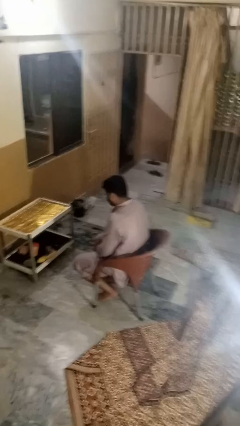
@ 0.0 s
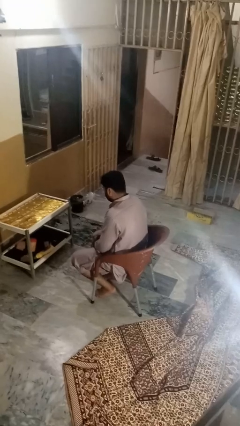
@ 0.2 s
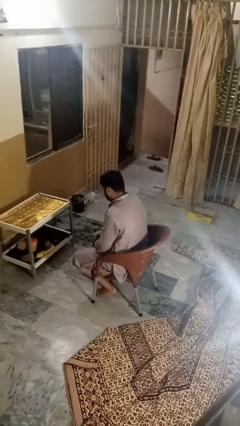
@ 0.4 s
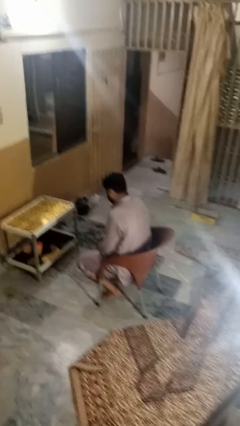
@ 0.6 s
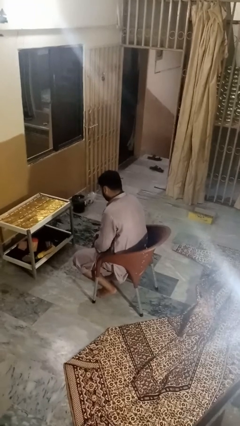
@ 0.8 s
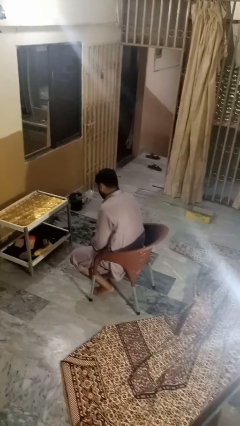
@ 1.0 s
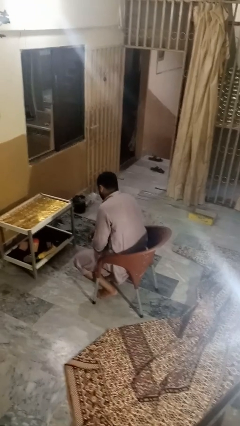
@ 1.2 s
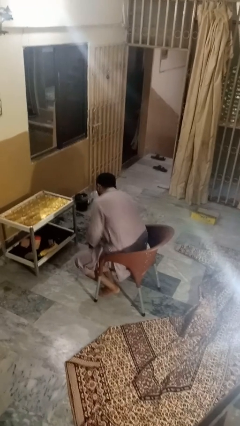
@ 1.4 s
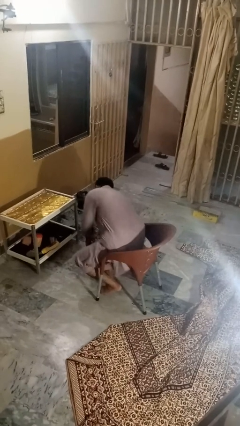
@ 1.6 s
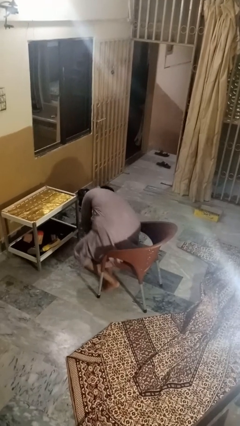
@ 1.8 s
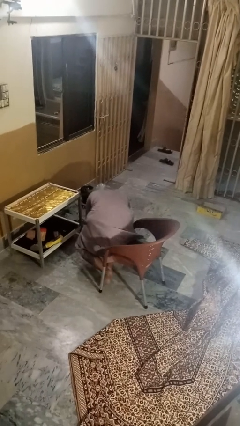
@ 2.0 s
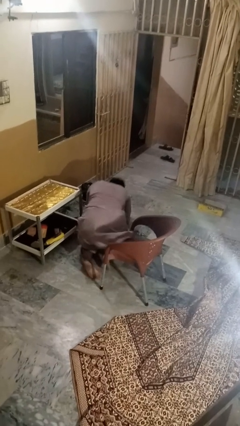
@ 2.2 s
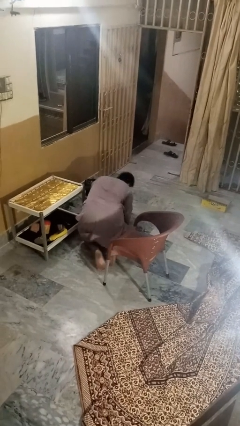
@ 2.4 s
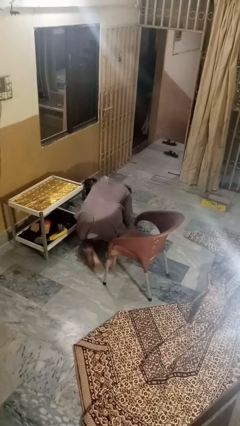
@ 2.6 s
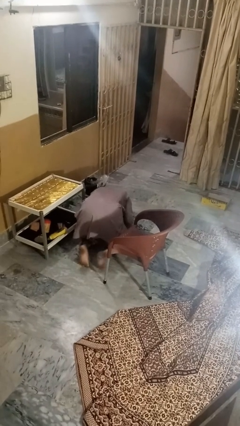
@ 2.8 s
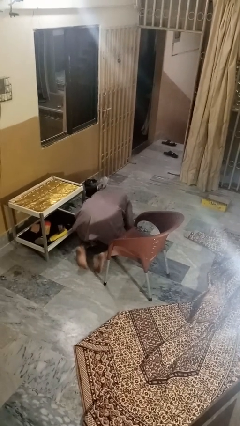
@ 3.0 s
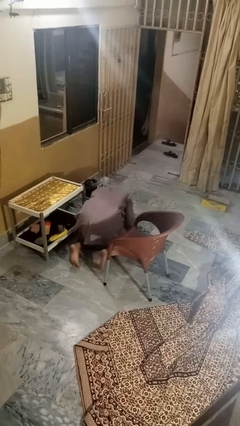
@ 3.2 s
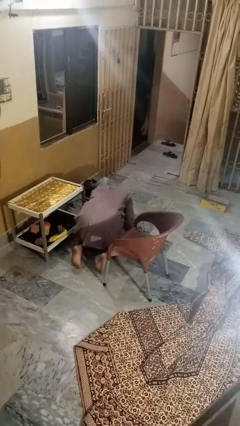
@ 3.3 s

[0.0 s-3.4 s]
person falls from chair

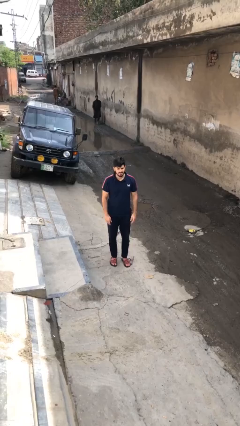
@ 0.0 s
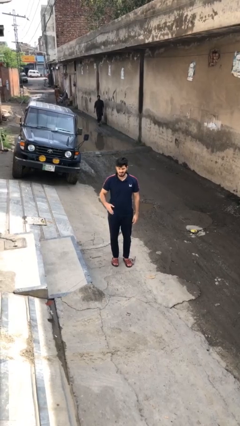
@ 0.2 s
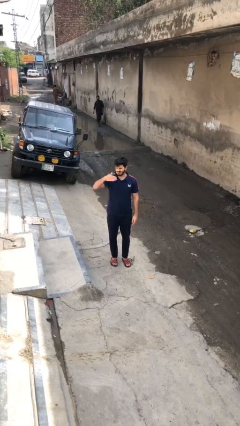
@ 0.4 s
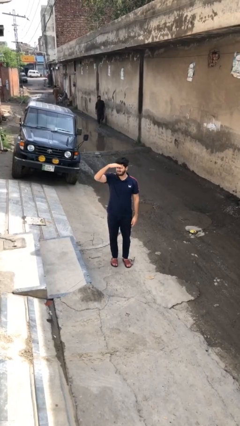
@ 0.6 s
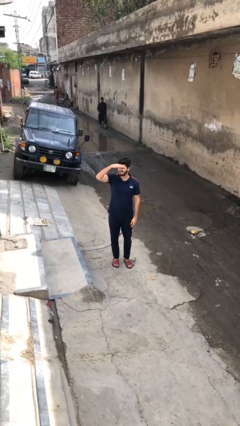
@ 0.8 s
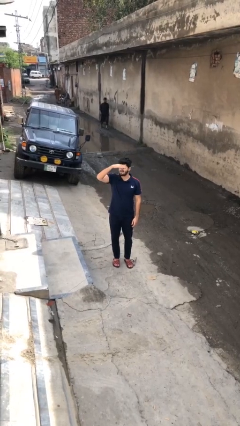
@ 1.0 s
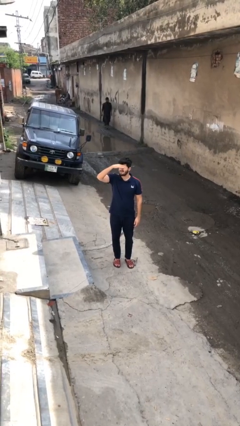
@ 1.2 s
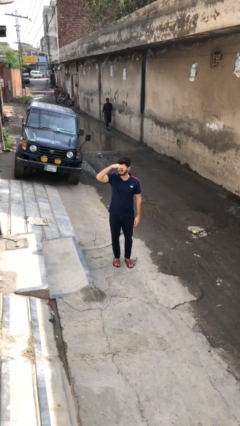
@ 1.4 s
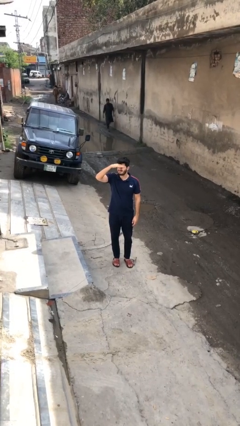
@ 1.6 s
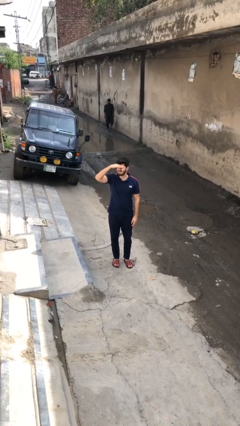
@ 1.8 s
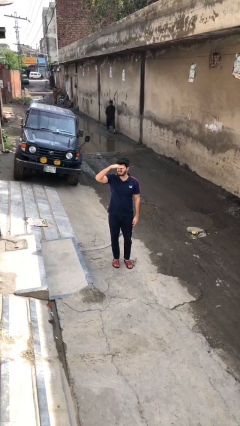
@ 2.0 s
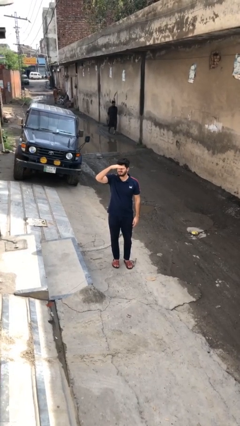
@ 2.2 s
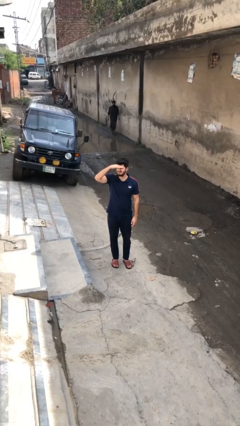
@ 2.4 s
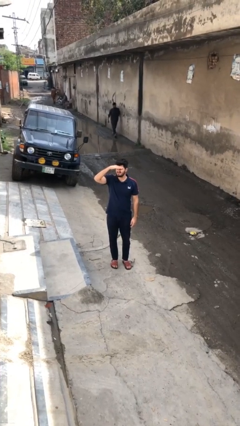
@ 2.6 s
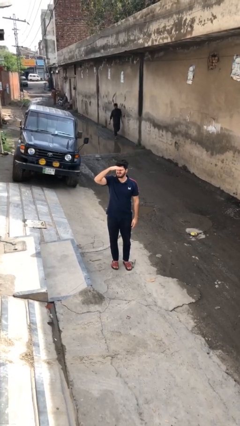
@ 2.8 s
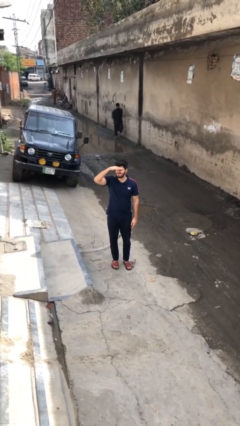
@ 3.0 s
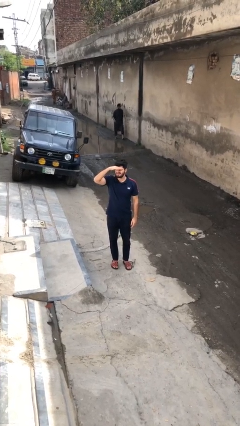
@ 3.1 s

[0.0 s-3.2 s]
person shades eyes

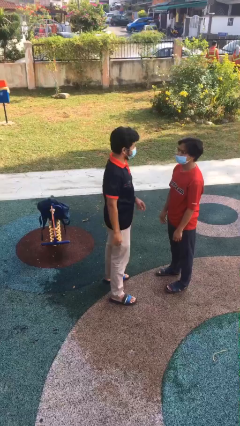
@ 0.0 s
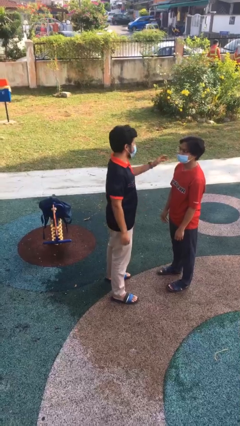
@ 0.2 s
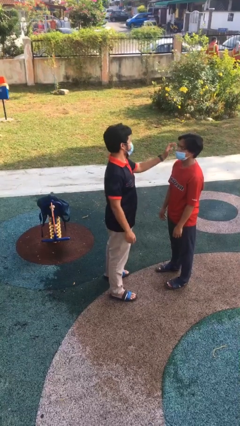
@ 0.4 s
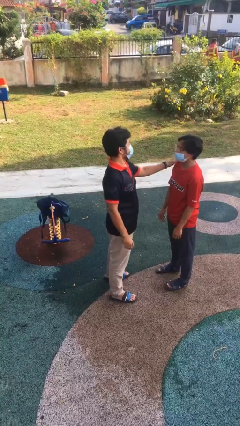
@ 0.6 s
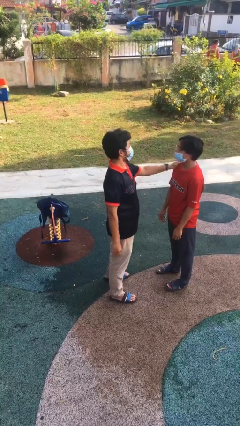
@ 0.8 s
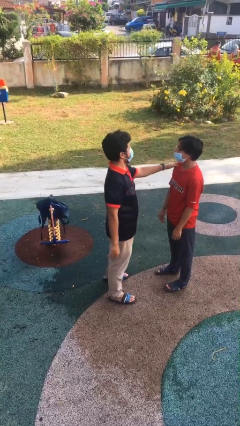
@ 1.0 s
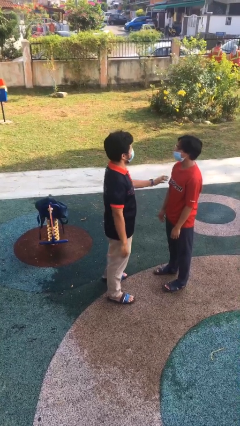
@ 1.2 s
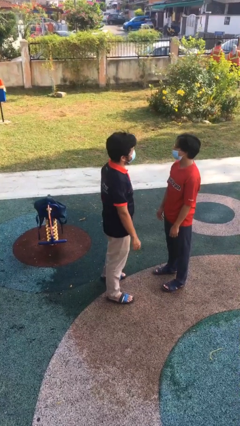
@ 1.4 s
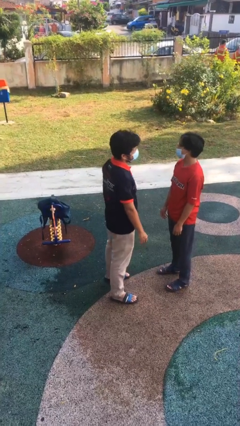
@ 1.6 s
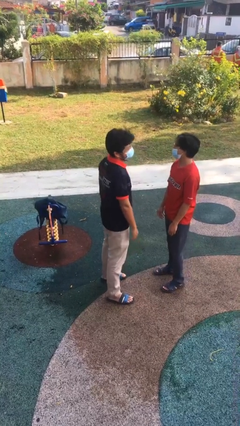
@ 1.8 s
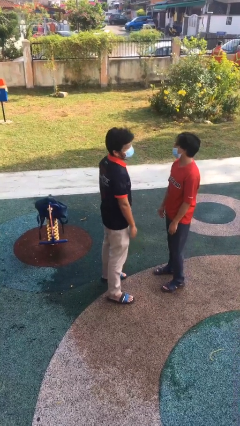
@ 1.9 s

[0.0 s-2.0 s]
person pounds shoulders of person

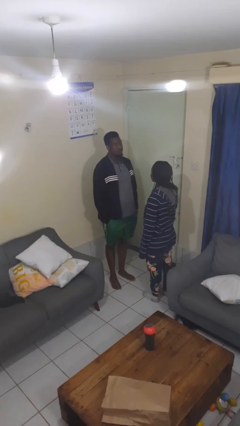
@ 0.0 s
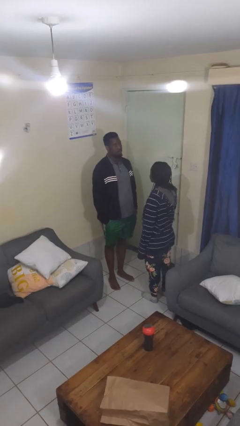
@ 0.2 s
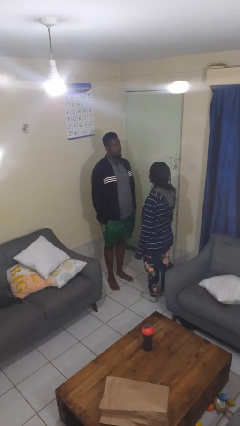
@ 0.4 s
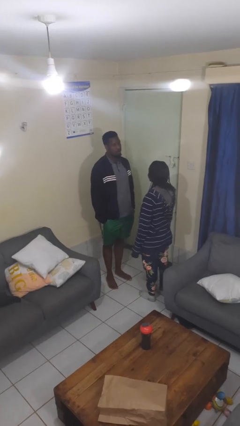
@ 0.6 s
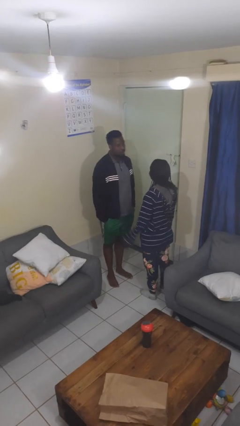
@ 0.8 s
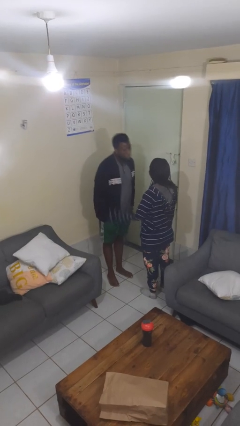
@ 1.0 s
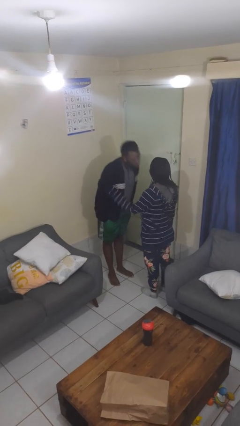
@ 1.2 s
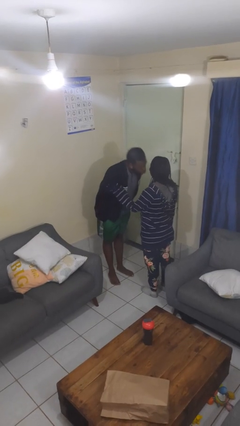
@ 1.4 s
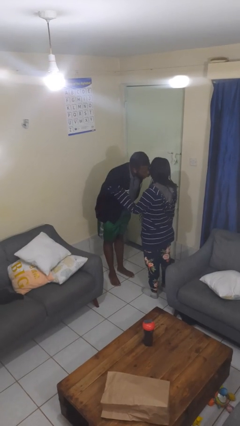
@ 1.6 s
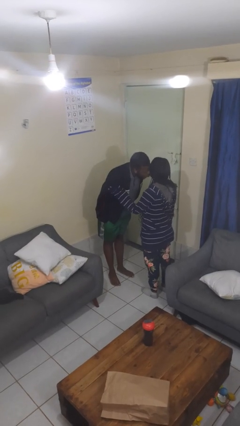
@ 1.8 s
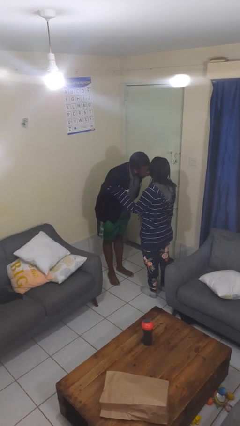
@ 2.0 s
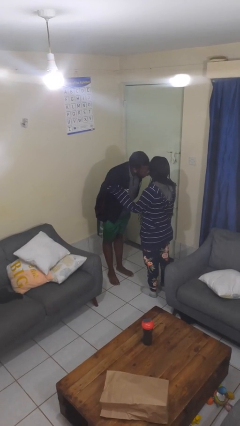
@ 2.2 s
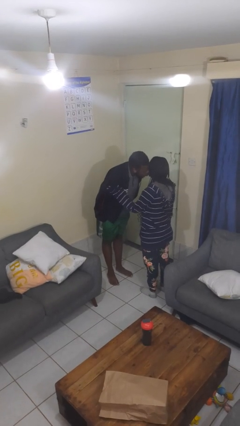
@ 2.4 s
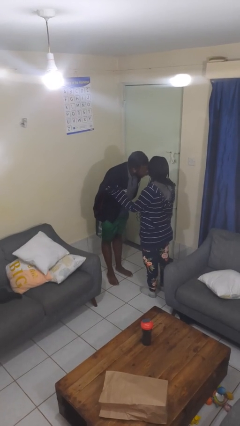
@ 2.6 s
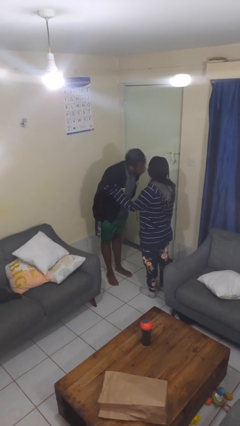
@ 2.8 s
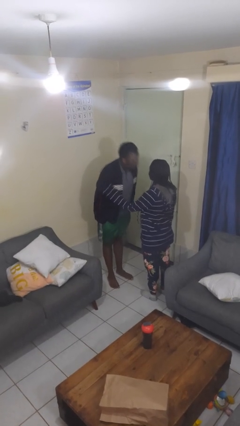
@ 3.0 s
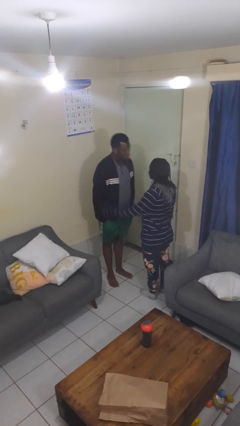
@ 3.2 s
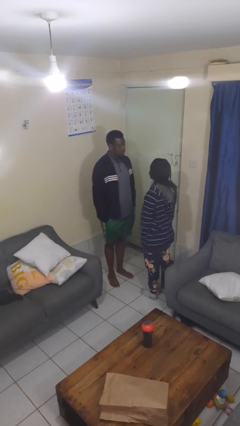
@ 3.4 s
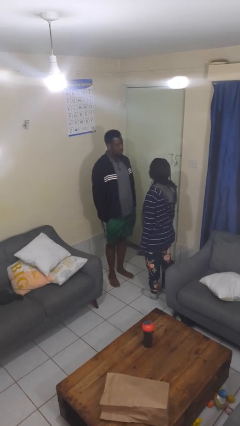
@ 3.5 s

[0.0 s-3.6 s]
person kisses cheek of person

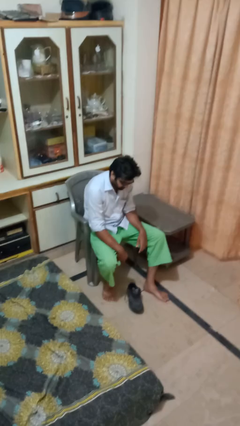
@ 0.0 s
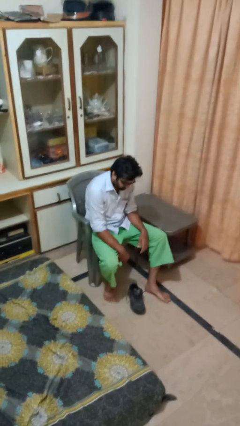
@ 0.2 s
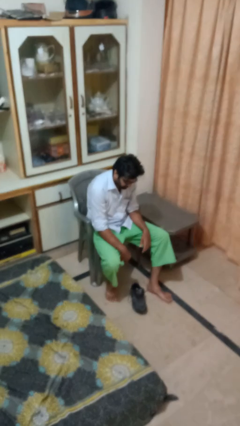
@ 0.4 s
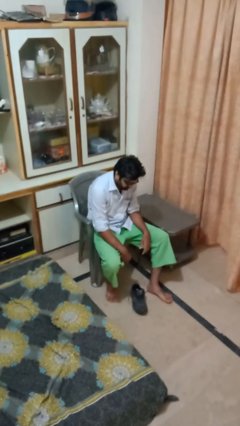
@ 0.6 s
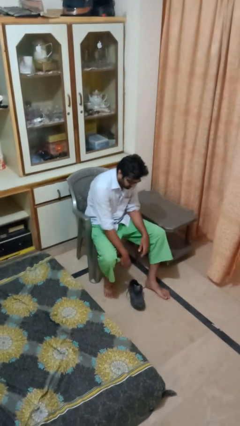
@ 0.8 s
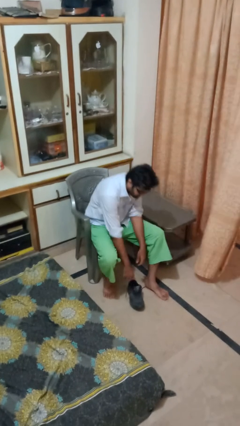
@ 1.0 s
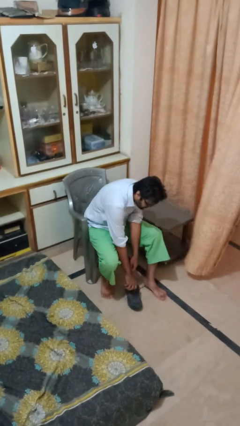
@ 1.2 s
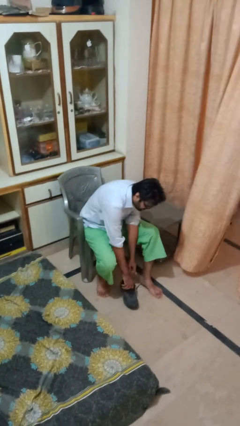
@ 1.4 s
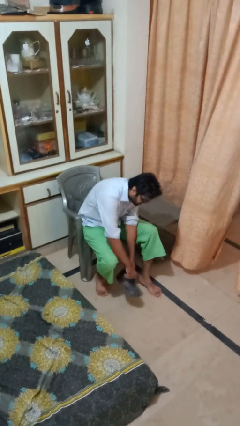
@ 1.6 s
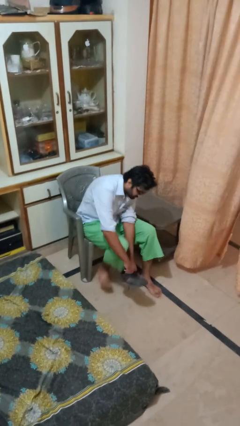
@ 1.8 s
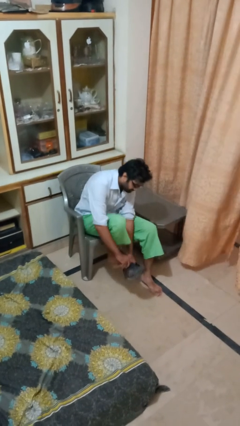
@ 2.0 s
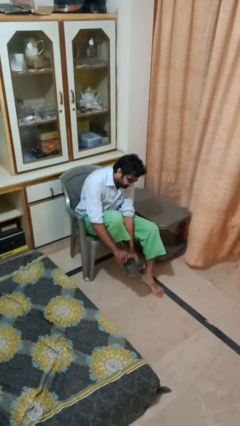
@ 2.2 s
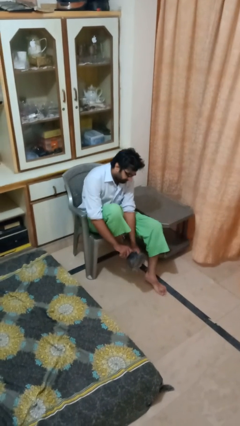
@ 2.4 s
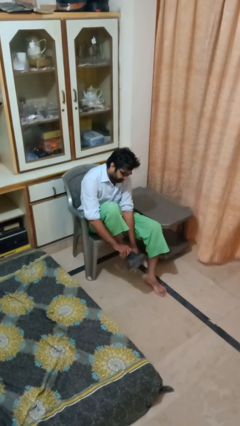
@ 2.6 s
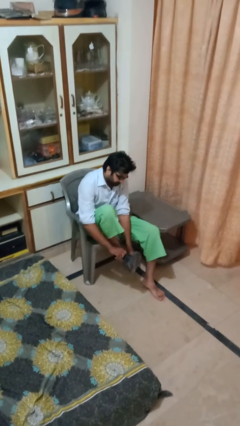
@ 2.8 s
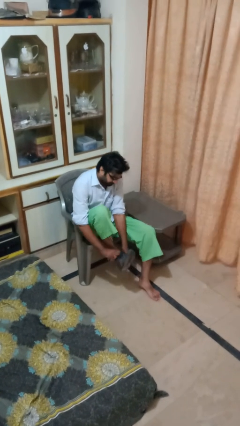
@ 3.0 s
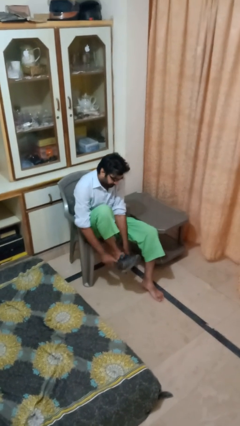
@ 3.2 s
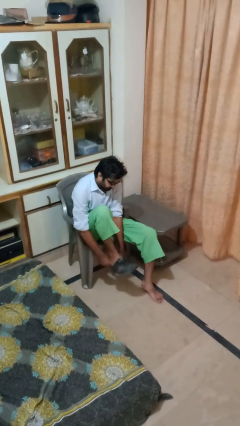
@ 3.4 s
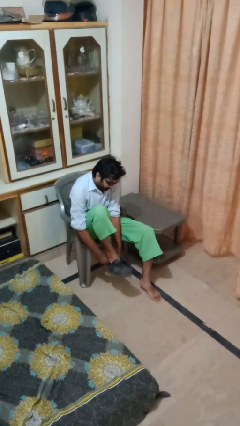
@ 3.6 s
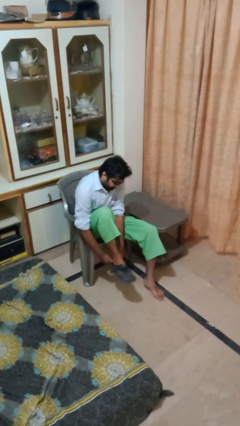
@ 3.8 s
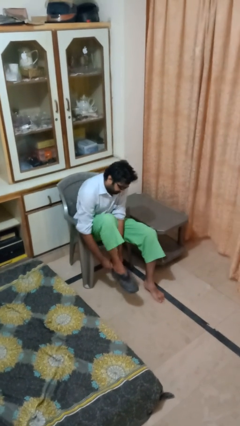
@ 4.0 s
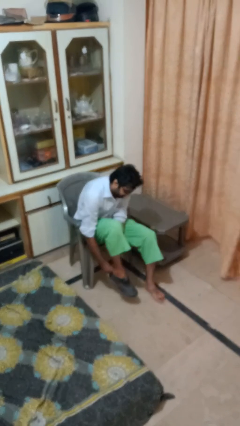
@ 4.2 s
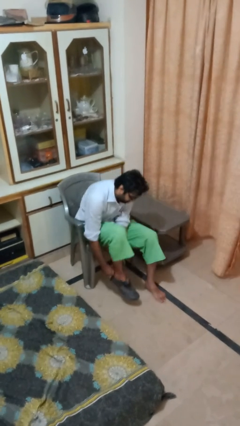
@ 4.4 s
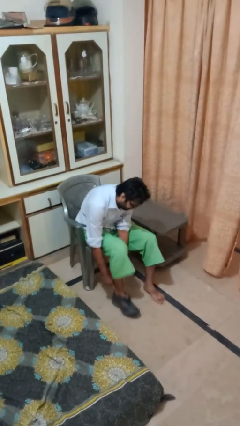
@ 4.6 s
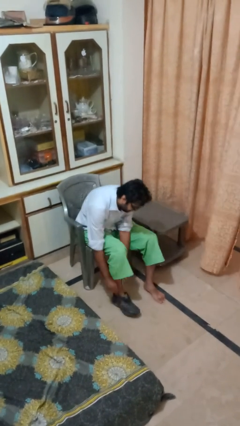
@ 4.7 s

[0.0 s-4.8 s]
person puts on boots

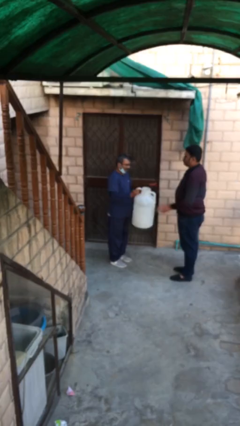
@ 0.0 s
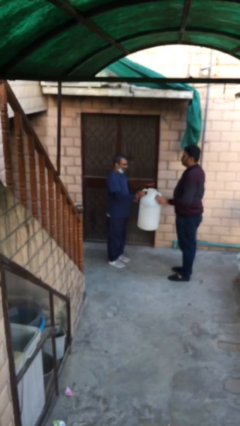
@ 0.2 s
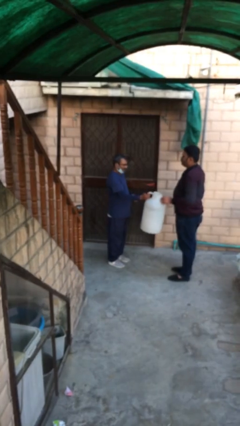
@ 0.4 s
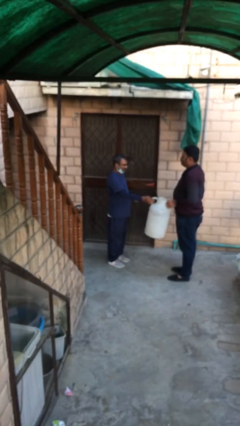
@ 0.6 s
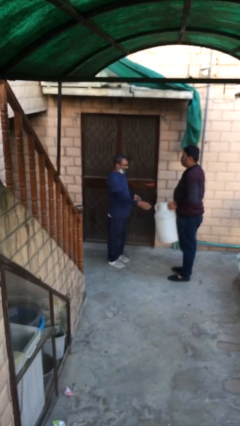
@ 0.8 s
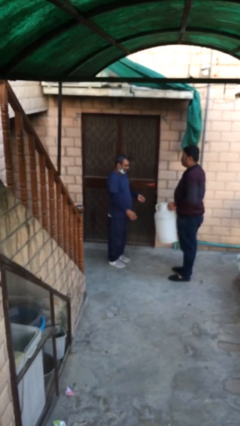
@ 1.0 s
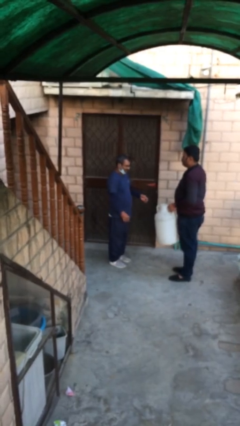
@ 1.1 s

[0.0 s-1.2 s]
person transfers object to person
